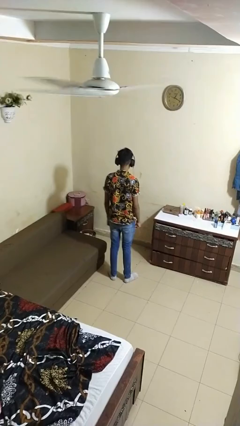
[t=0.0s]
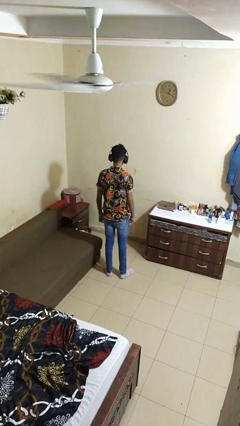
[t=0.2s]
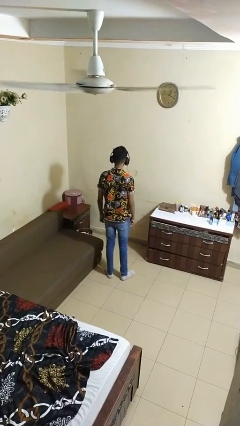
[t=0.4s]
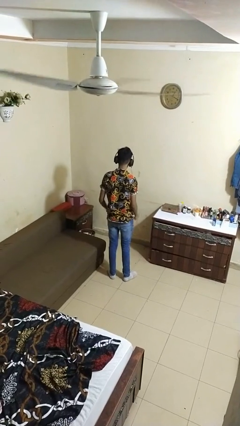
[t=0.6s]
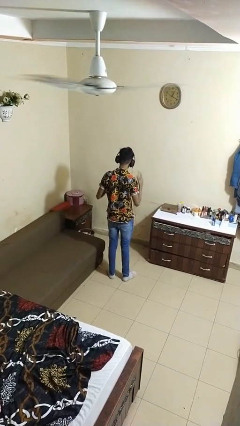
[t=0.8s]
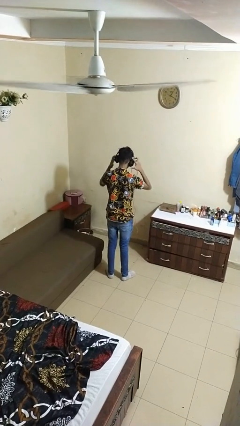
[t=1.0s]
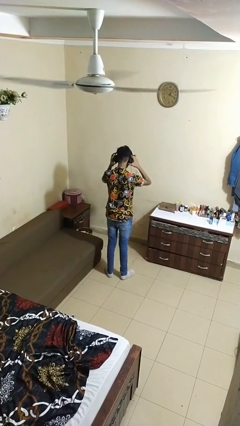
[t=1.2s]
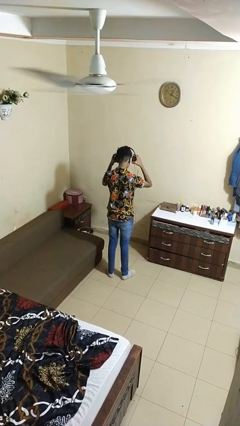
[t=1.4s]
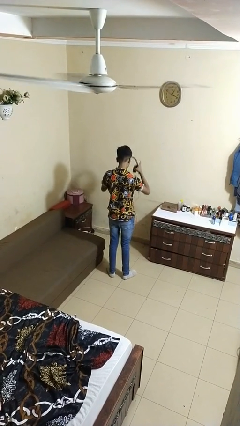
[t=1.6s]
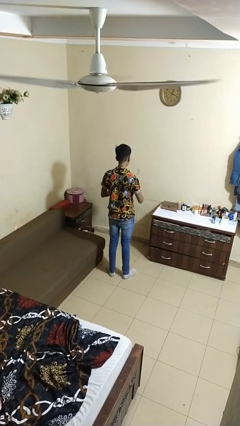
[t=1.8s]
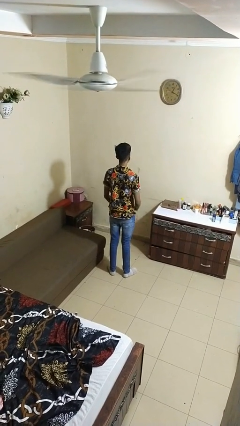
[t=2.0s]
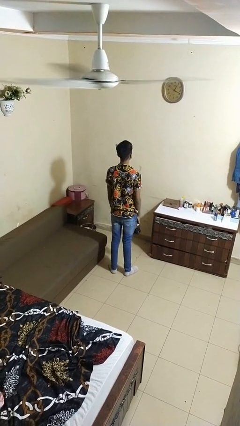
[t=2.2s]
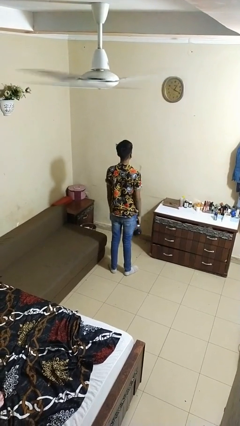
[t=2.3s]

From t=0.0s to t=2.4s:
person takes off headphones

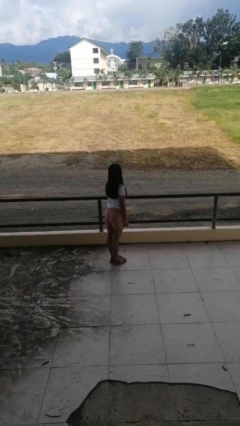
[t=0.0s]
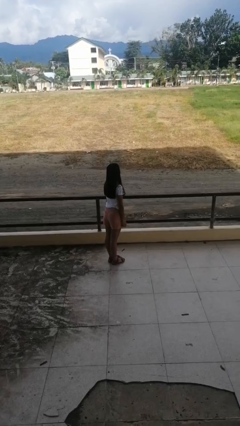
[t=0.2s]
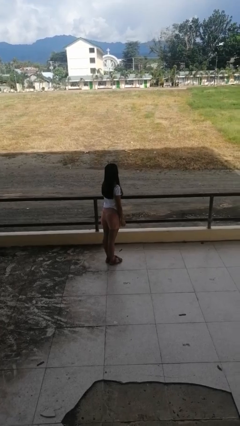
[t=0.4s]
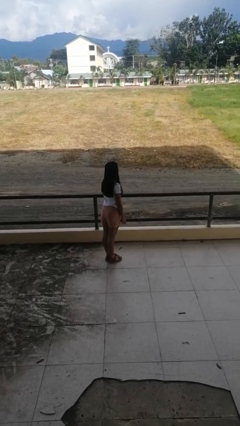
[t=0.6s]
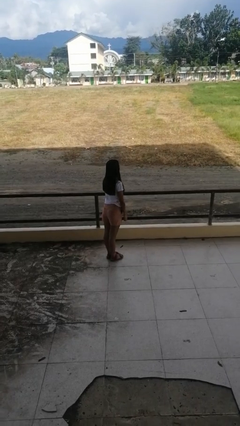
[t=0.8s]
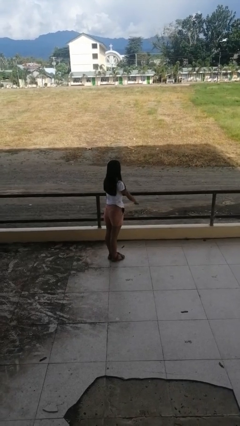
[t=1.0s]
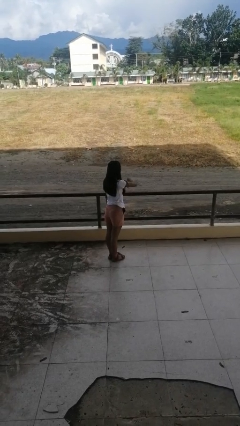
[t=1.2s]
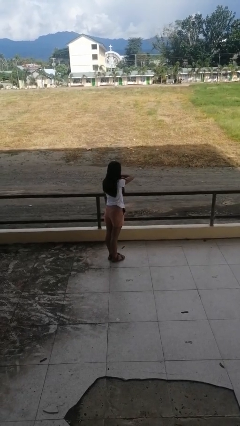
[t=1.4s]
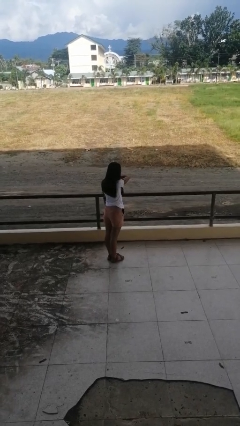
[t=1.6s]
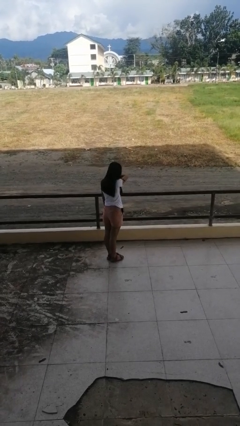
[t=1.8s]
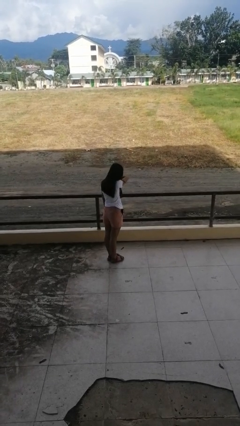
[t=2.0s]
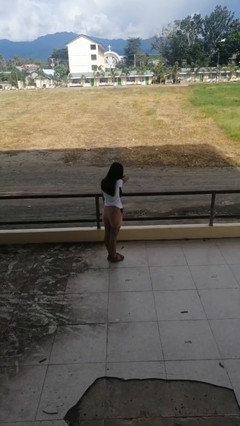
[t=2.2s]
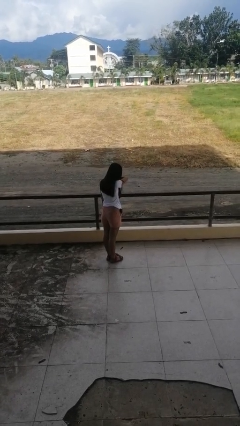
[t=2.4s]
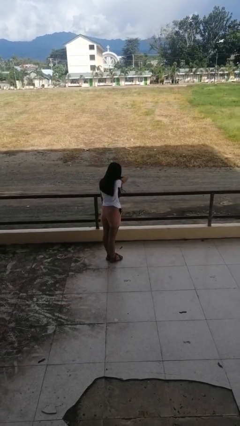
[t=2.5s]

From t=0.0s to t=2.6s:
person sneezes into arm

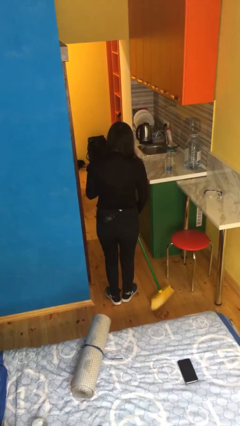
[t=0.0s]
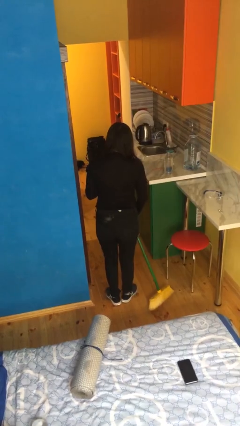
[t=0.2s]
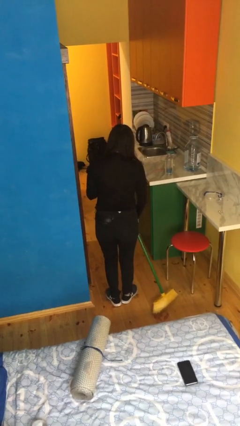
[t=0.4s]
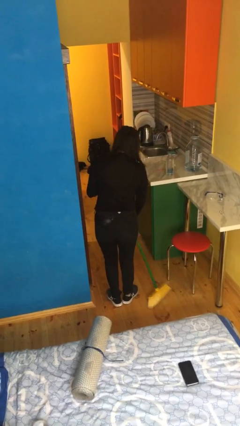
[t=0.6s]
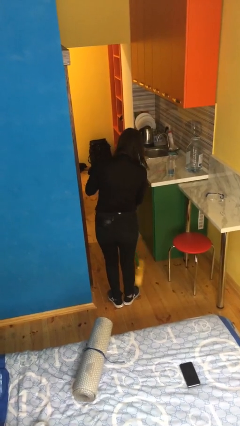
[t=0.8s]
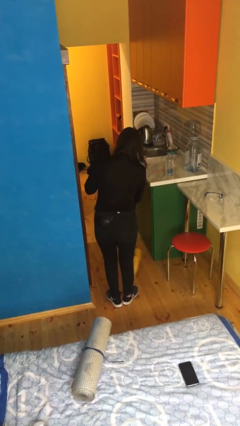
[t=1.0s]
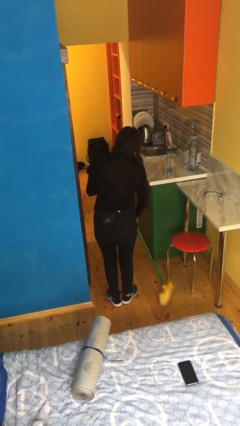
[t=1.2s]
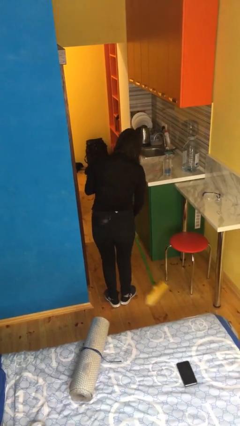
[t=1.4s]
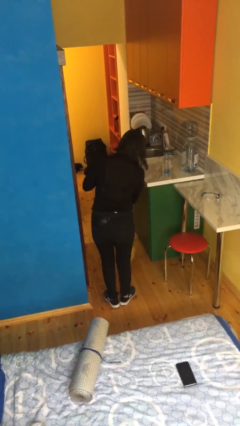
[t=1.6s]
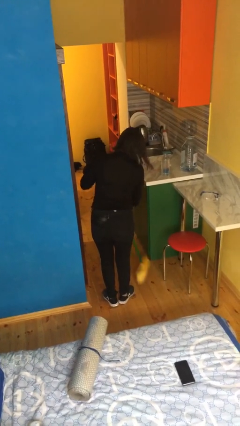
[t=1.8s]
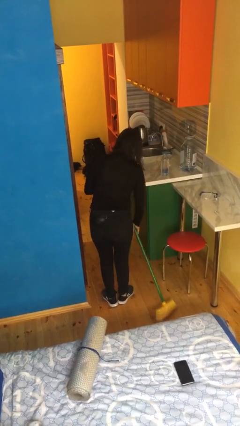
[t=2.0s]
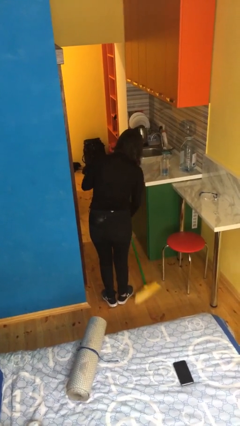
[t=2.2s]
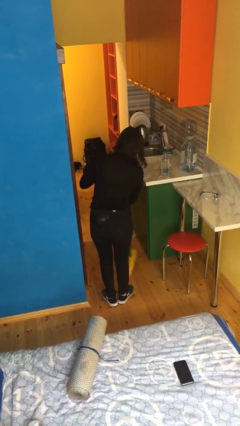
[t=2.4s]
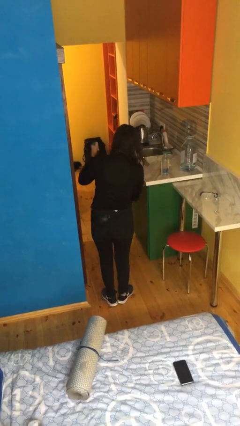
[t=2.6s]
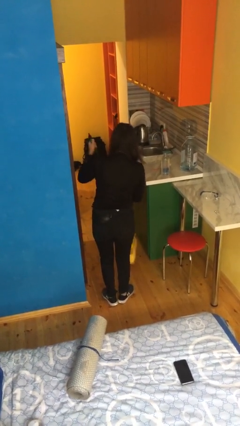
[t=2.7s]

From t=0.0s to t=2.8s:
person sweeps floor

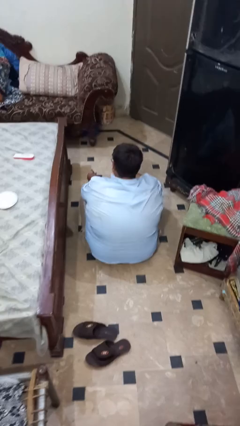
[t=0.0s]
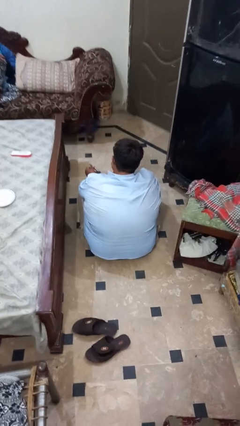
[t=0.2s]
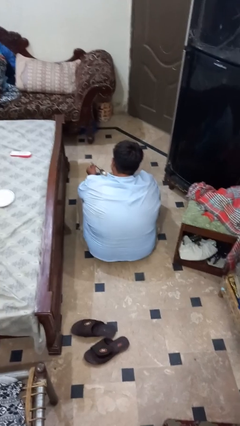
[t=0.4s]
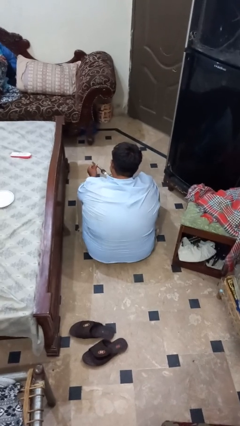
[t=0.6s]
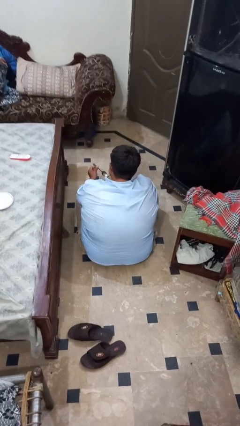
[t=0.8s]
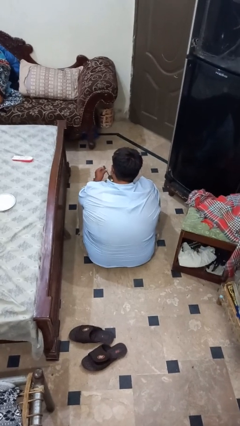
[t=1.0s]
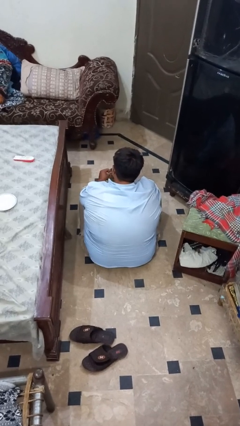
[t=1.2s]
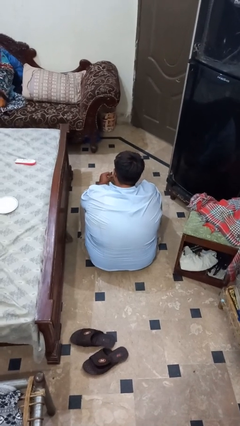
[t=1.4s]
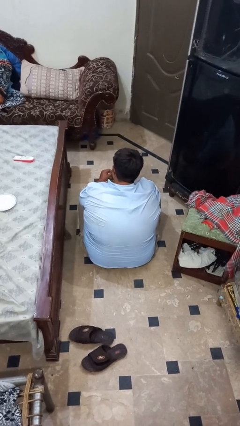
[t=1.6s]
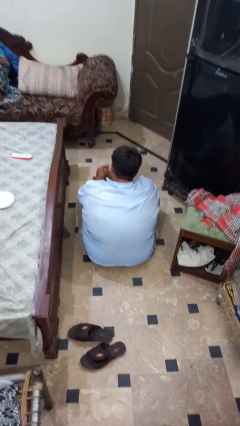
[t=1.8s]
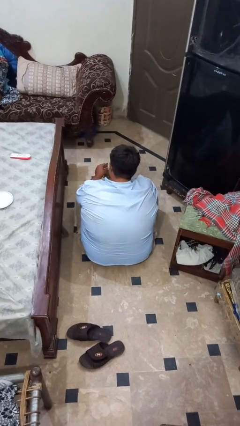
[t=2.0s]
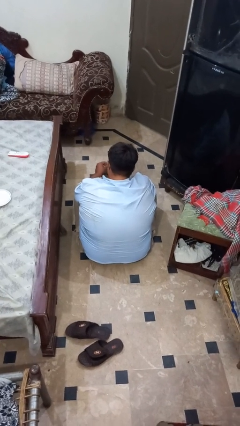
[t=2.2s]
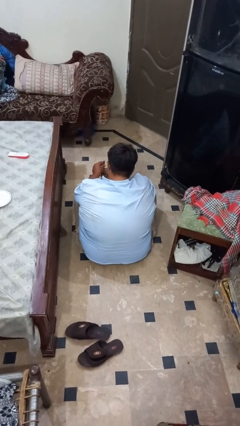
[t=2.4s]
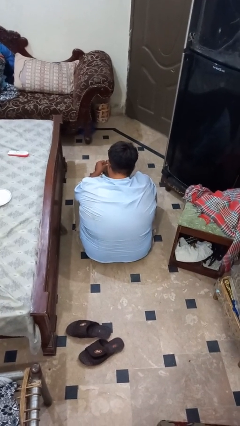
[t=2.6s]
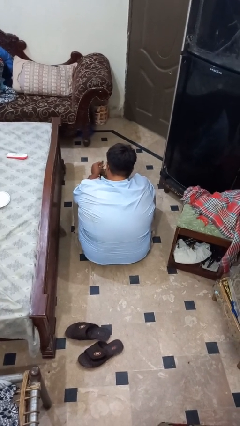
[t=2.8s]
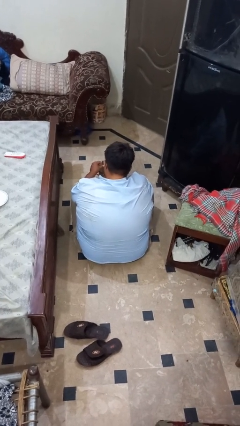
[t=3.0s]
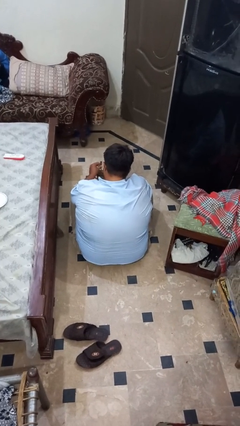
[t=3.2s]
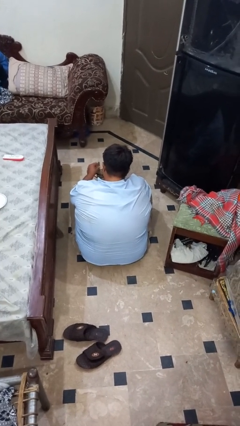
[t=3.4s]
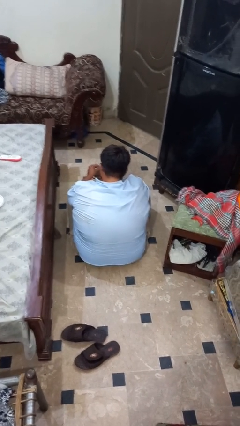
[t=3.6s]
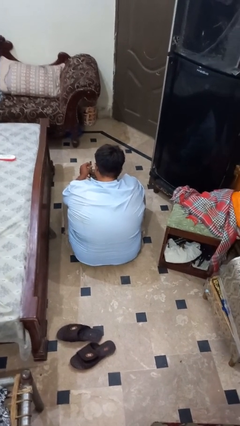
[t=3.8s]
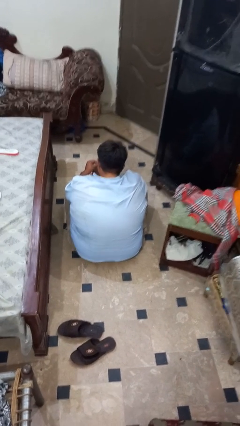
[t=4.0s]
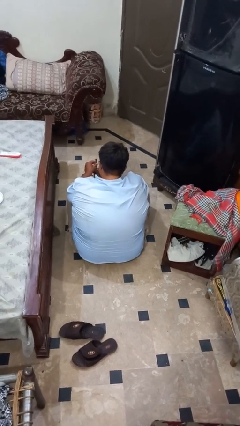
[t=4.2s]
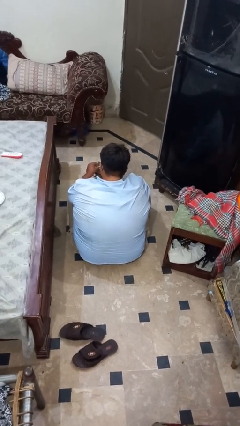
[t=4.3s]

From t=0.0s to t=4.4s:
person stirs mug

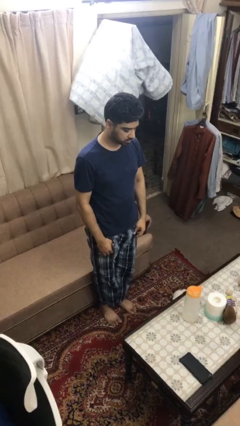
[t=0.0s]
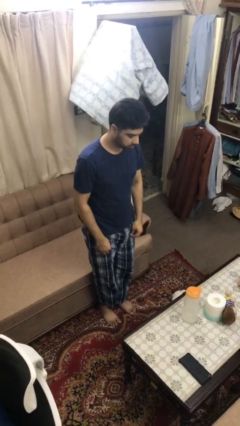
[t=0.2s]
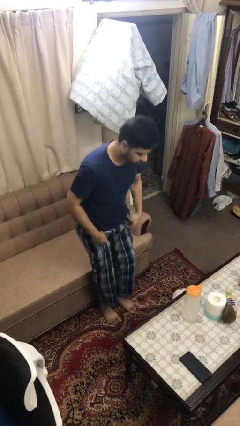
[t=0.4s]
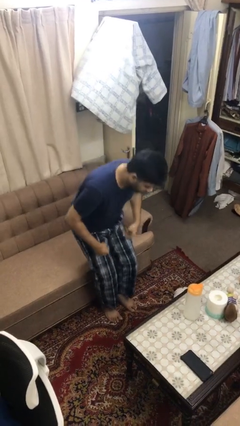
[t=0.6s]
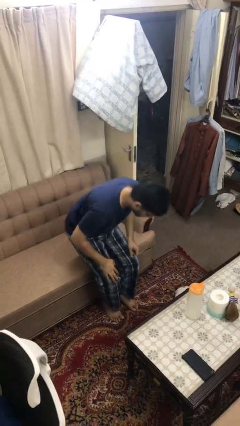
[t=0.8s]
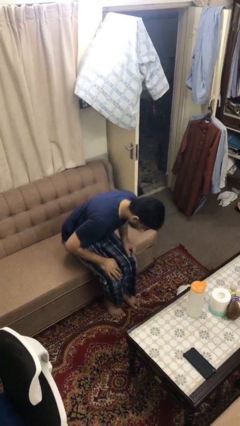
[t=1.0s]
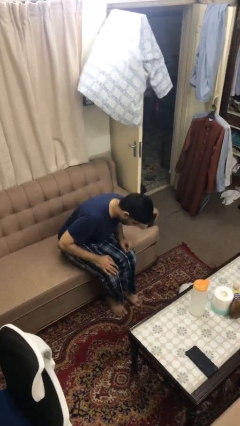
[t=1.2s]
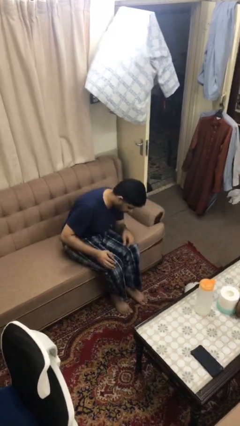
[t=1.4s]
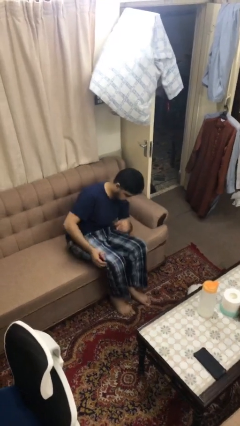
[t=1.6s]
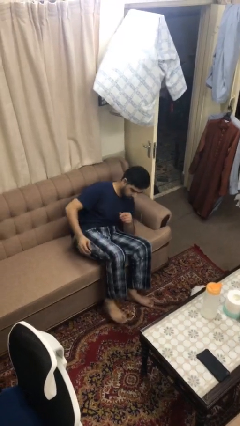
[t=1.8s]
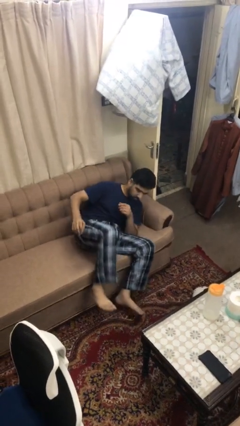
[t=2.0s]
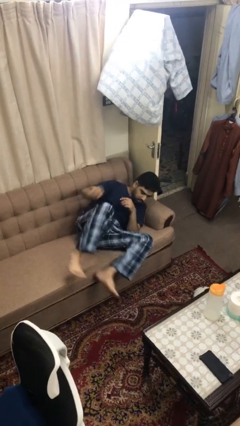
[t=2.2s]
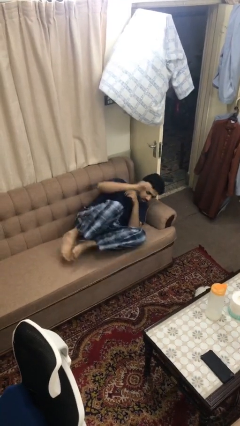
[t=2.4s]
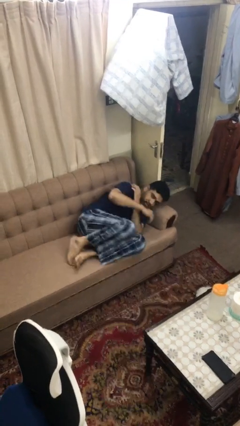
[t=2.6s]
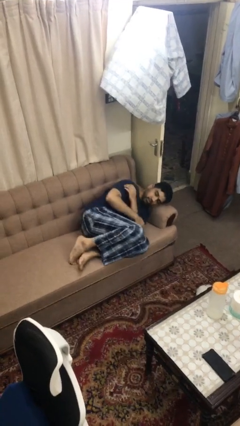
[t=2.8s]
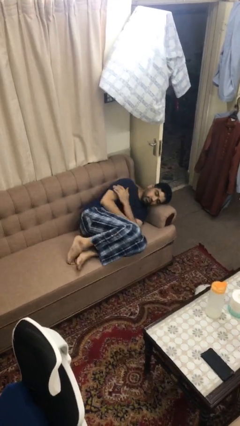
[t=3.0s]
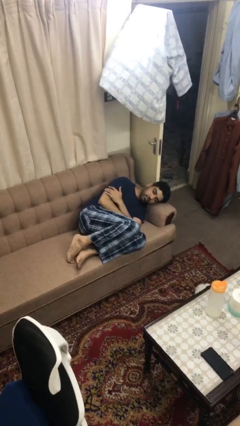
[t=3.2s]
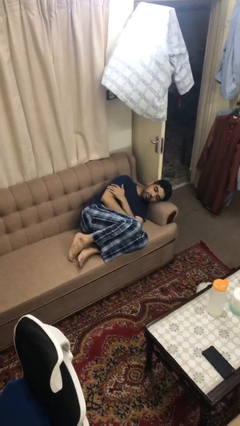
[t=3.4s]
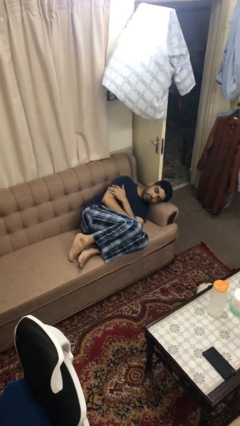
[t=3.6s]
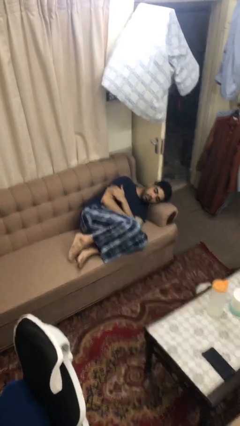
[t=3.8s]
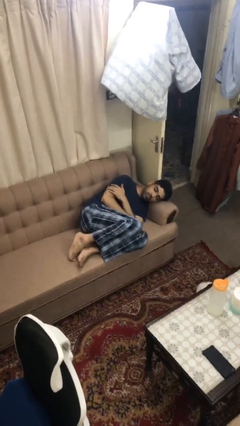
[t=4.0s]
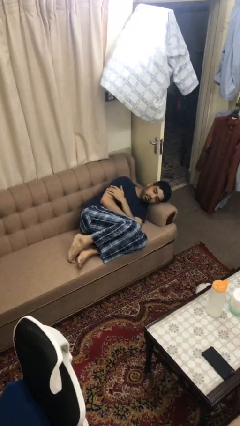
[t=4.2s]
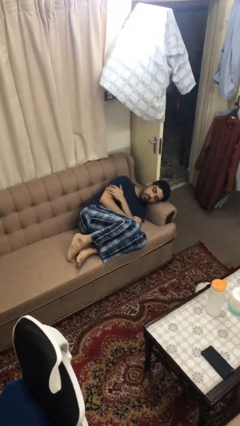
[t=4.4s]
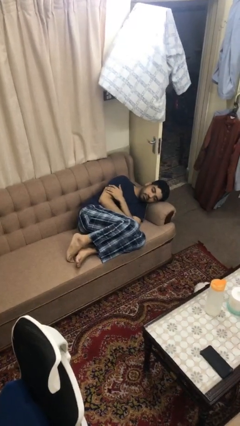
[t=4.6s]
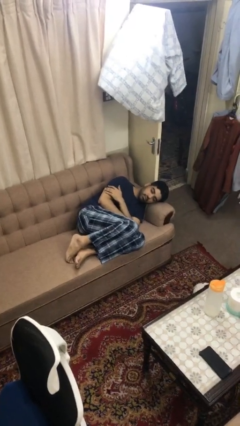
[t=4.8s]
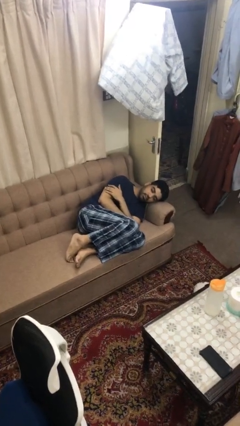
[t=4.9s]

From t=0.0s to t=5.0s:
person lies down on couch
